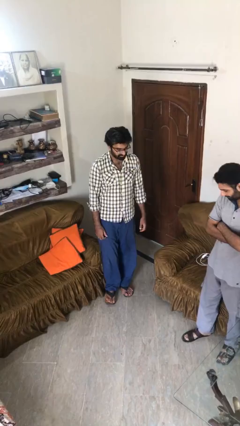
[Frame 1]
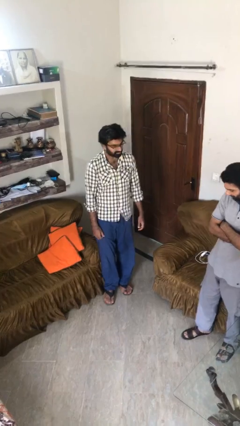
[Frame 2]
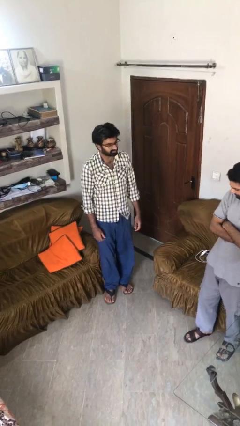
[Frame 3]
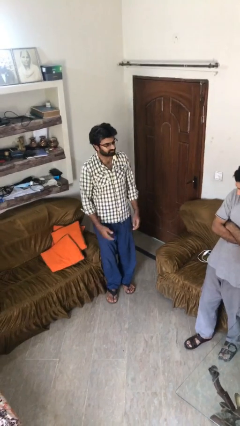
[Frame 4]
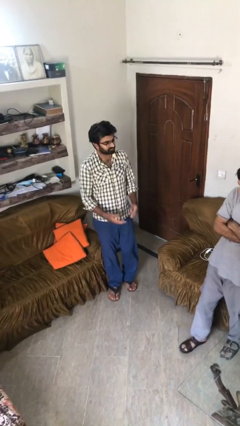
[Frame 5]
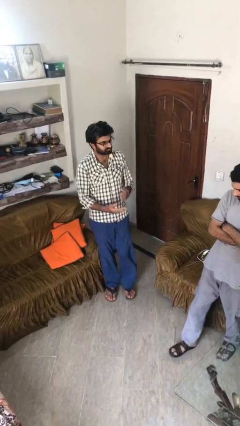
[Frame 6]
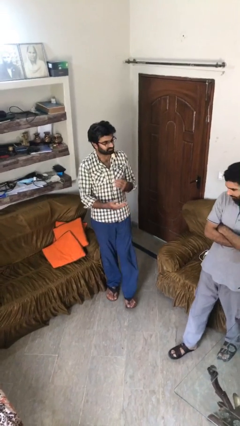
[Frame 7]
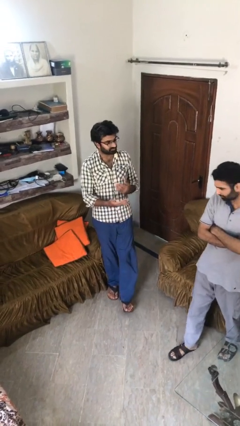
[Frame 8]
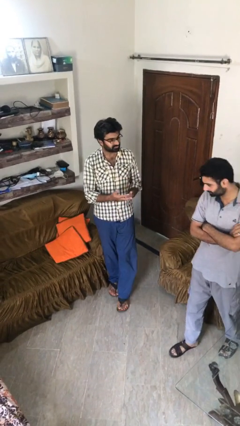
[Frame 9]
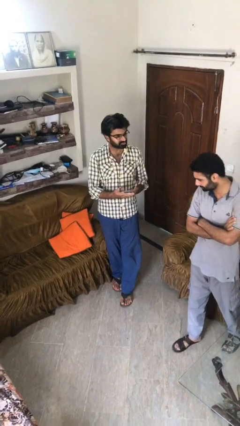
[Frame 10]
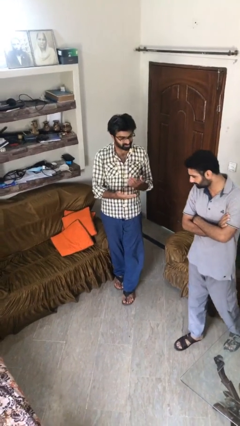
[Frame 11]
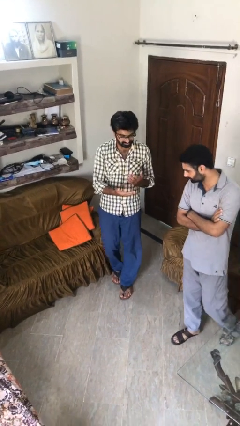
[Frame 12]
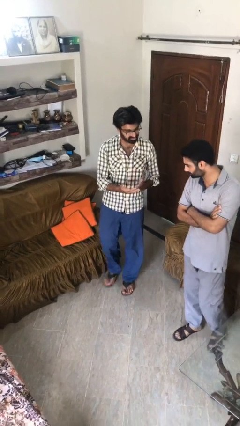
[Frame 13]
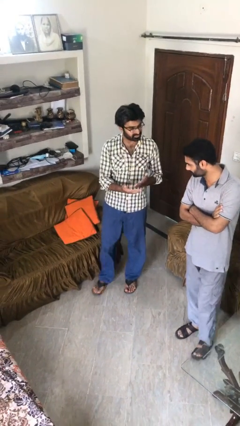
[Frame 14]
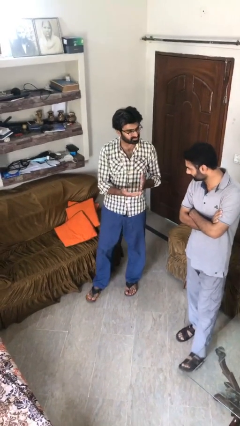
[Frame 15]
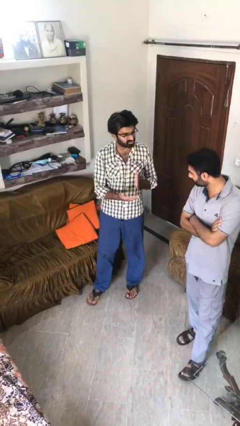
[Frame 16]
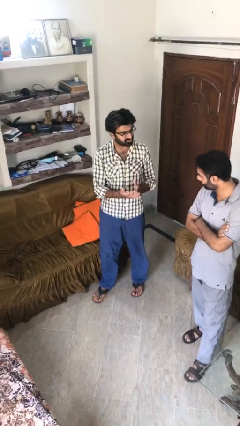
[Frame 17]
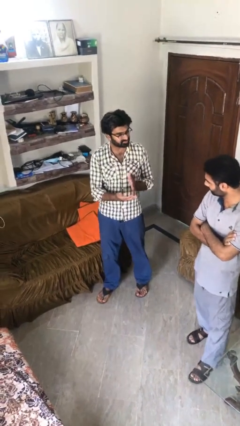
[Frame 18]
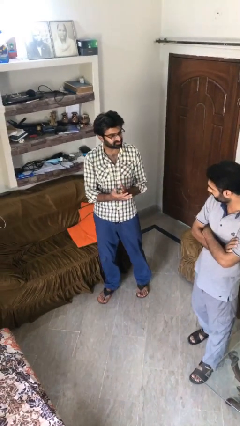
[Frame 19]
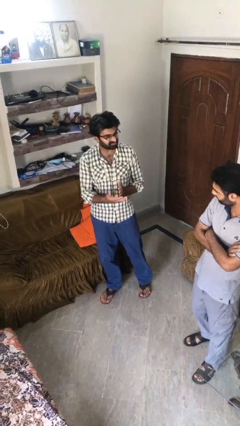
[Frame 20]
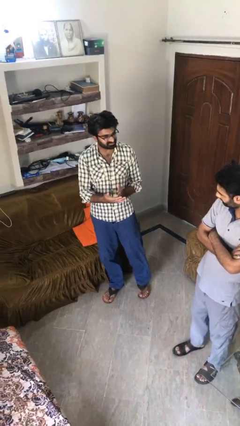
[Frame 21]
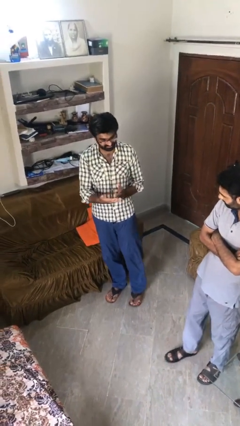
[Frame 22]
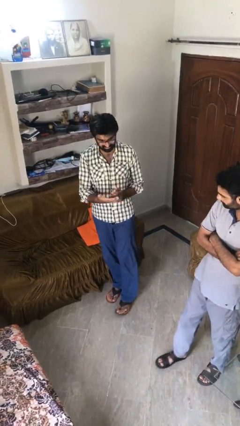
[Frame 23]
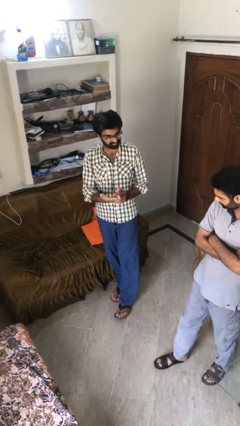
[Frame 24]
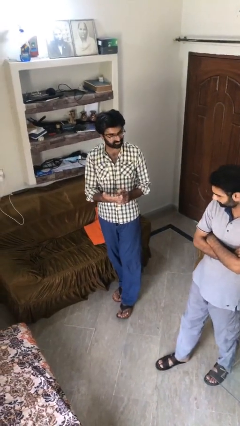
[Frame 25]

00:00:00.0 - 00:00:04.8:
person talks to person

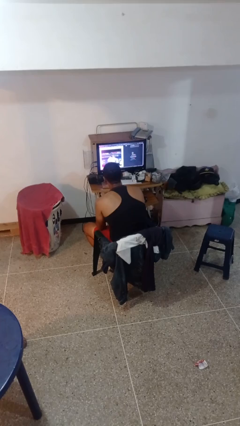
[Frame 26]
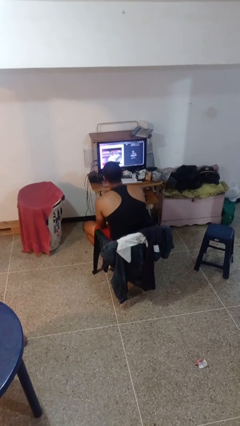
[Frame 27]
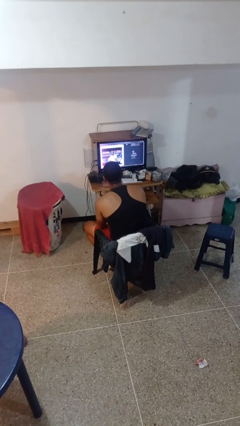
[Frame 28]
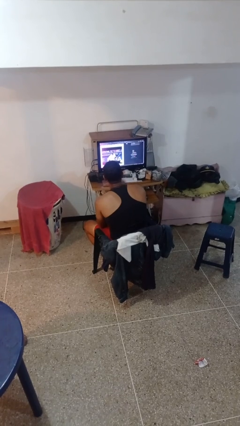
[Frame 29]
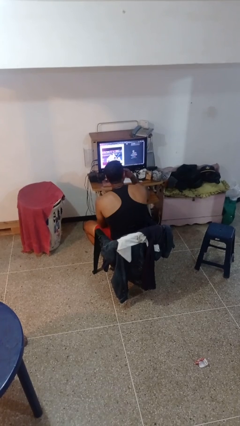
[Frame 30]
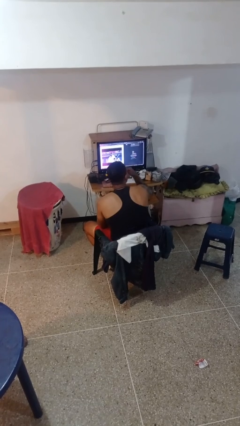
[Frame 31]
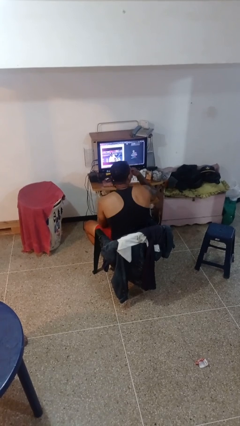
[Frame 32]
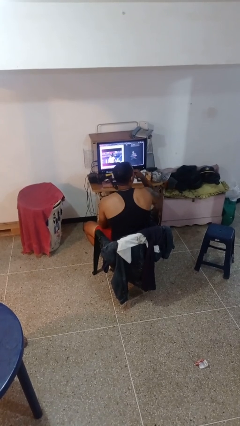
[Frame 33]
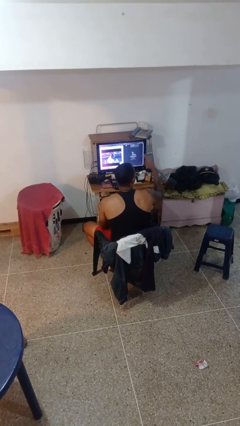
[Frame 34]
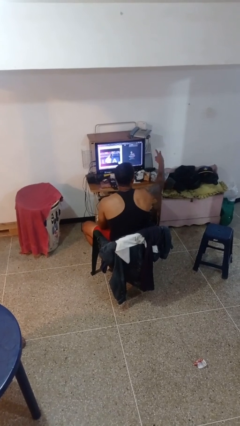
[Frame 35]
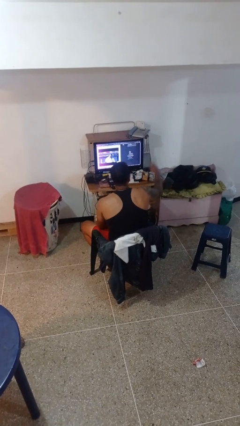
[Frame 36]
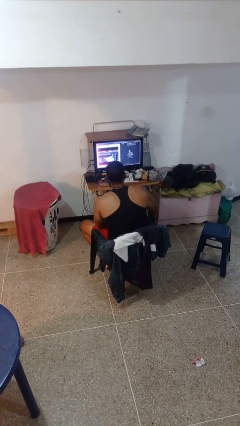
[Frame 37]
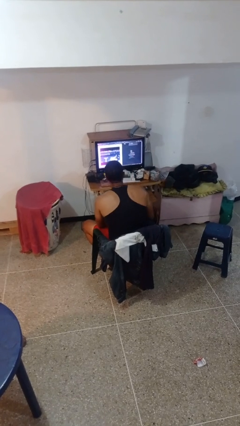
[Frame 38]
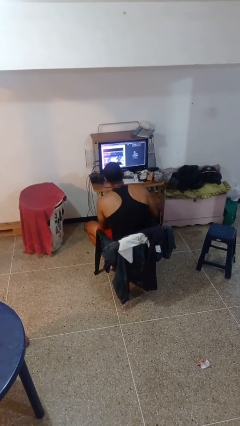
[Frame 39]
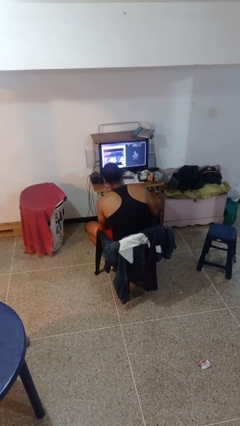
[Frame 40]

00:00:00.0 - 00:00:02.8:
person gestures watch closely

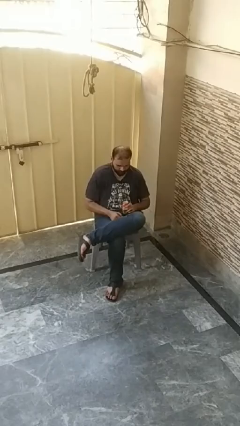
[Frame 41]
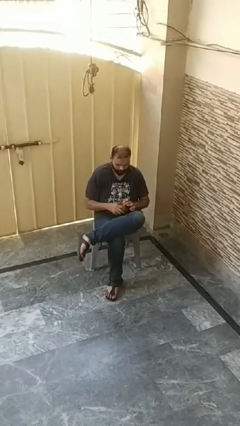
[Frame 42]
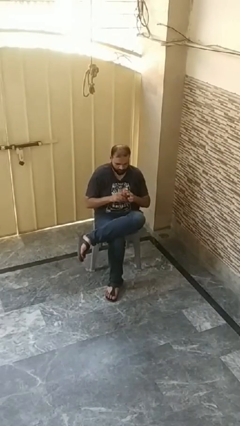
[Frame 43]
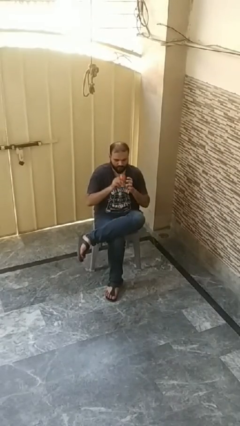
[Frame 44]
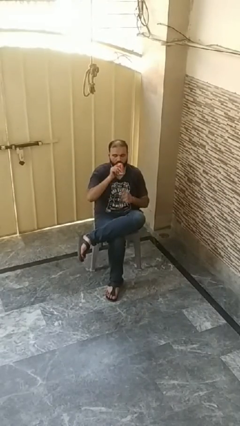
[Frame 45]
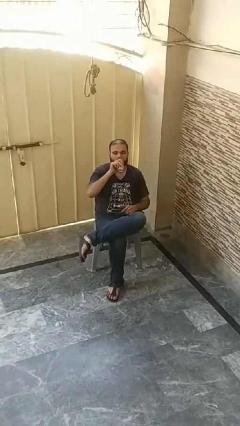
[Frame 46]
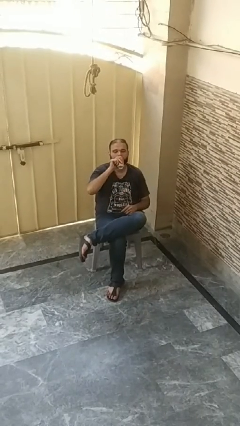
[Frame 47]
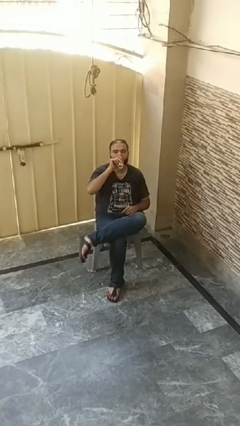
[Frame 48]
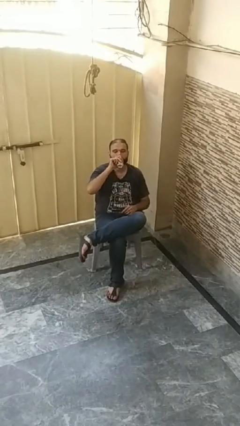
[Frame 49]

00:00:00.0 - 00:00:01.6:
person drinks from beverage can

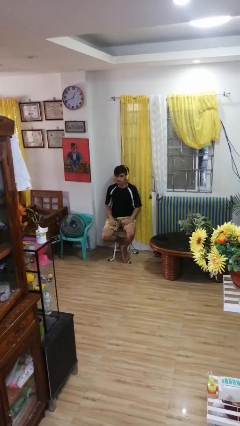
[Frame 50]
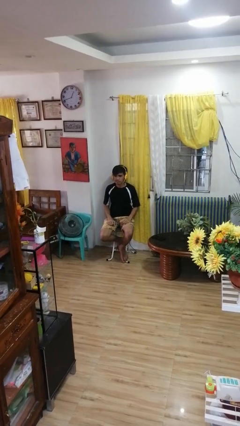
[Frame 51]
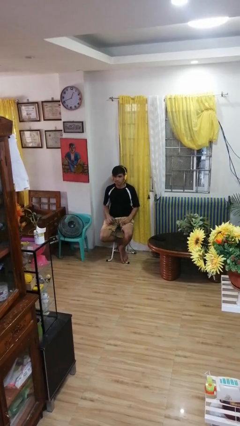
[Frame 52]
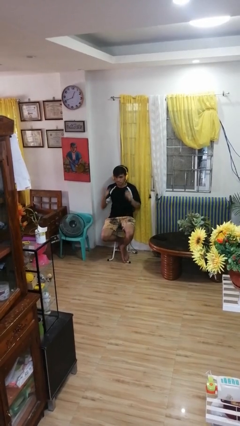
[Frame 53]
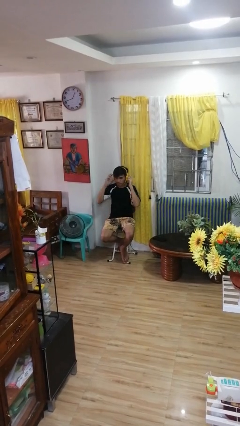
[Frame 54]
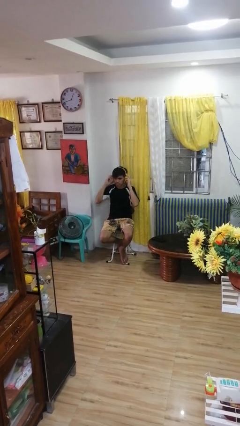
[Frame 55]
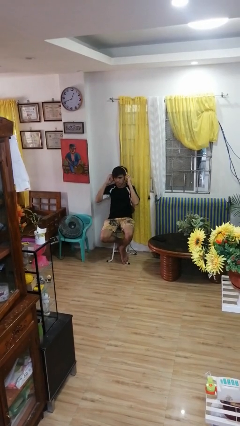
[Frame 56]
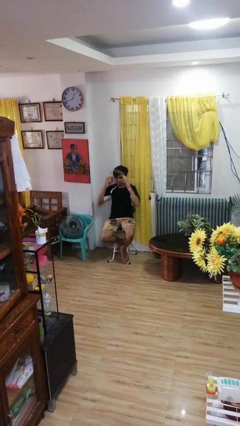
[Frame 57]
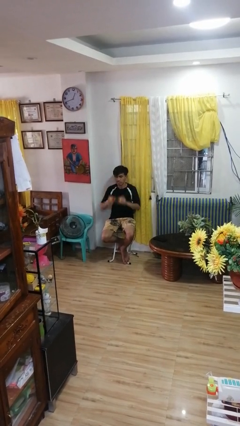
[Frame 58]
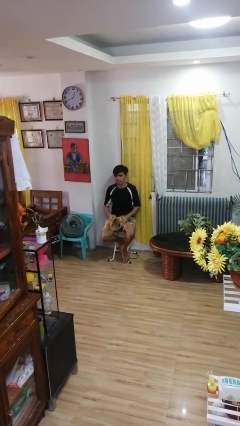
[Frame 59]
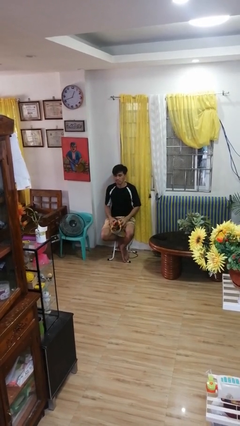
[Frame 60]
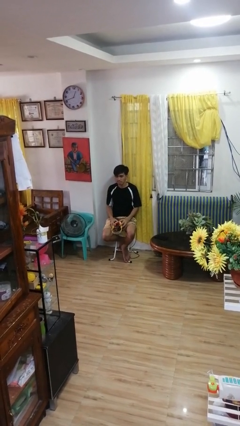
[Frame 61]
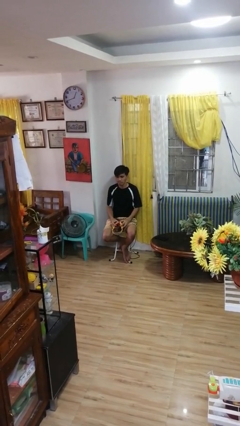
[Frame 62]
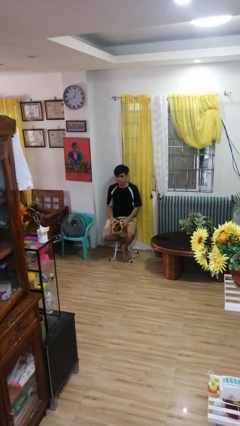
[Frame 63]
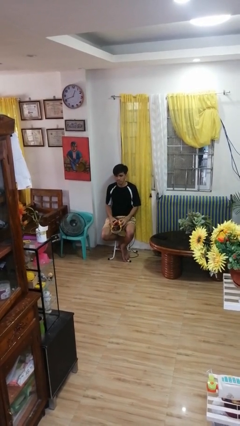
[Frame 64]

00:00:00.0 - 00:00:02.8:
person takes off headphones

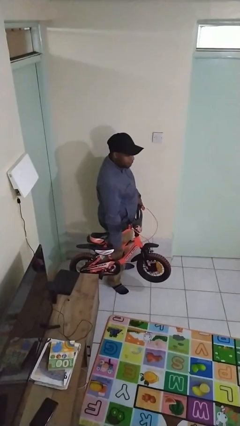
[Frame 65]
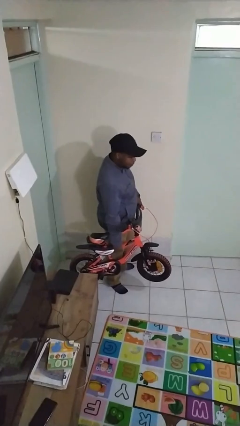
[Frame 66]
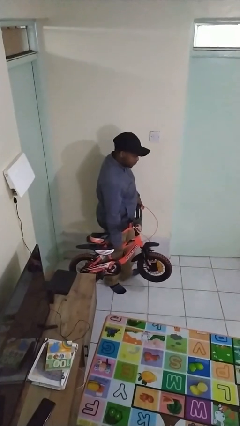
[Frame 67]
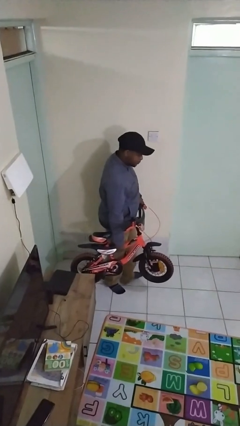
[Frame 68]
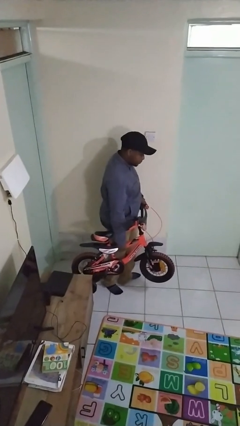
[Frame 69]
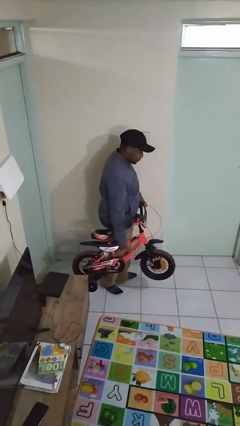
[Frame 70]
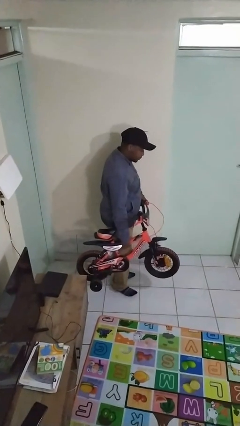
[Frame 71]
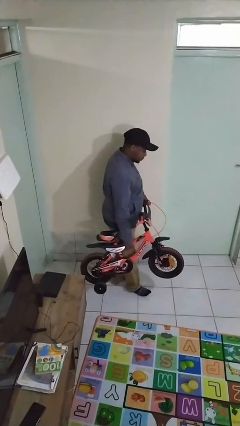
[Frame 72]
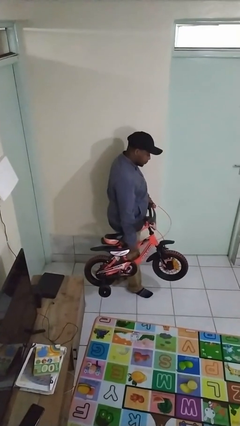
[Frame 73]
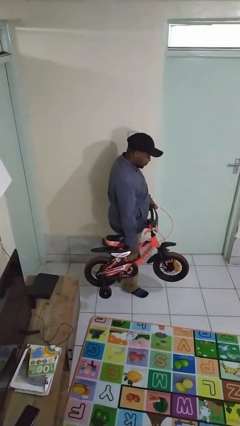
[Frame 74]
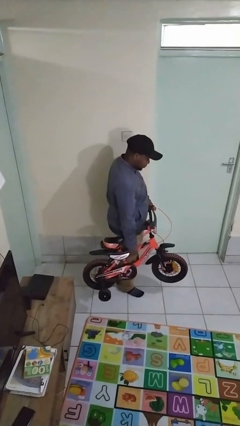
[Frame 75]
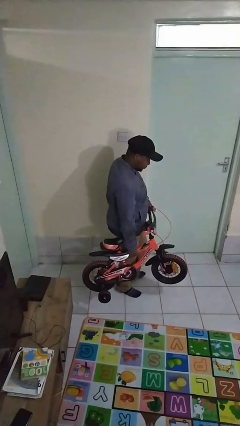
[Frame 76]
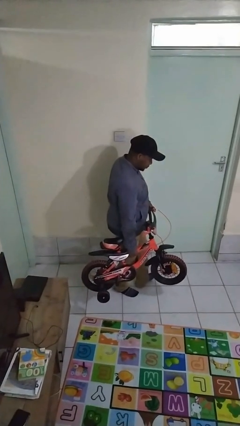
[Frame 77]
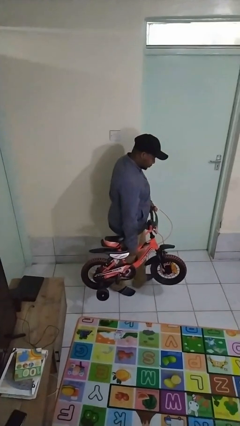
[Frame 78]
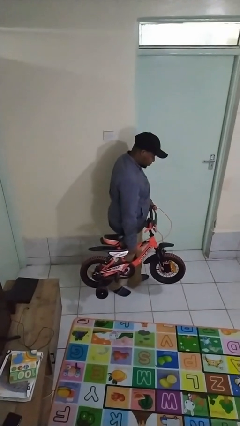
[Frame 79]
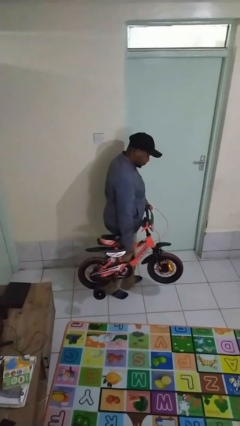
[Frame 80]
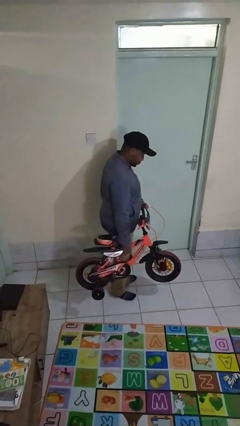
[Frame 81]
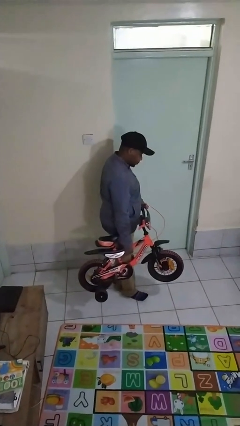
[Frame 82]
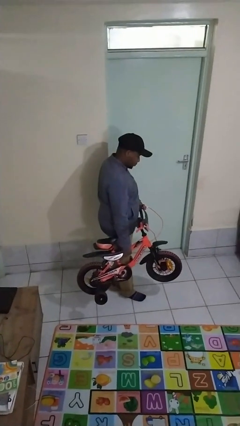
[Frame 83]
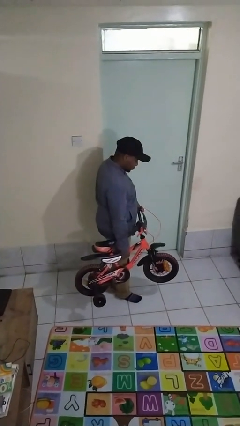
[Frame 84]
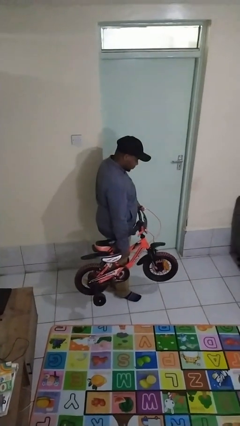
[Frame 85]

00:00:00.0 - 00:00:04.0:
person carries bicycle

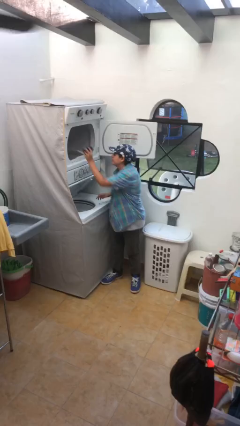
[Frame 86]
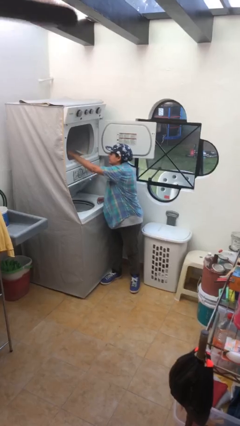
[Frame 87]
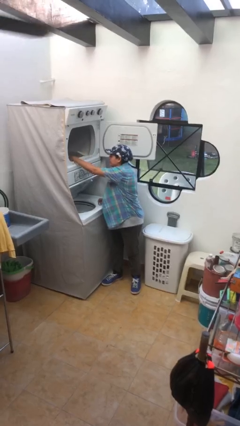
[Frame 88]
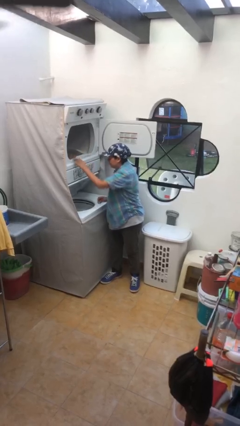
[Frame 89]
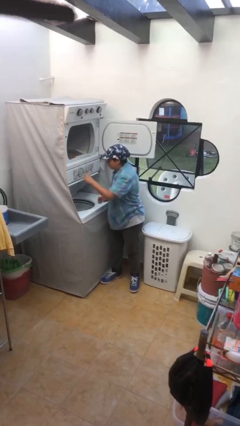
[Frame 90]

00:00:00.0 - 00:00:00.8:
person loads dryer

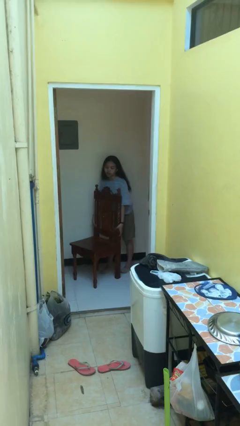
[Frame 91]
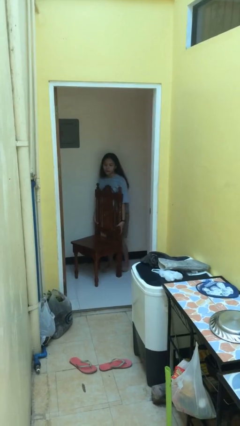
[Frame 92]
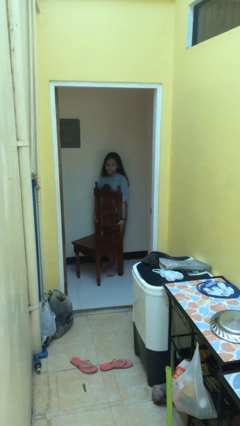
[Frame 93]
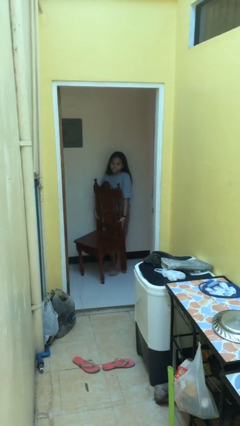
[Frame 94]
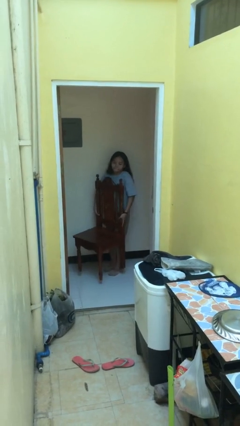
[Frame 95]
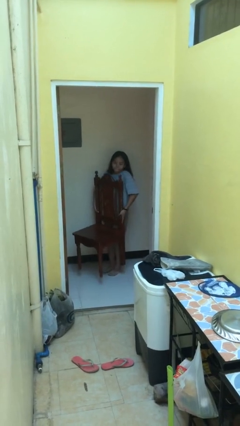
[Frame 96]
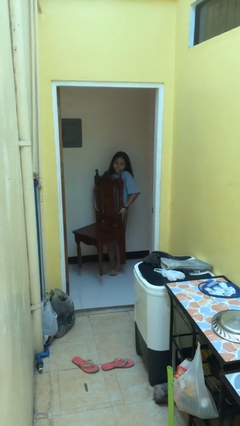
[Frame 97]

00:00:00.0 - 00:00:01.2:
person picks up object from floor
